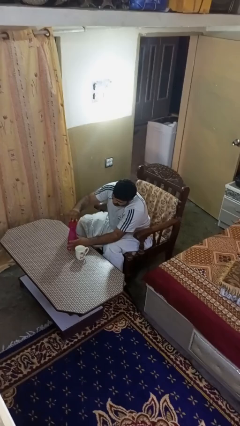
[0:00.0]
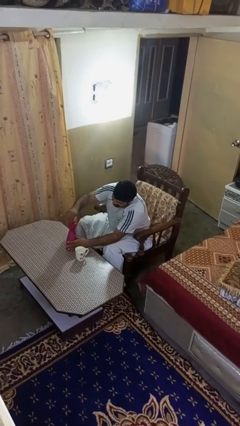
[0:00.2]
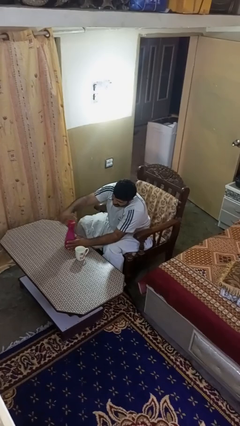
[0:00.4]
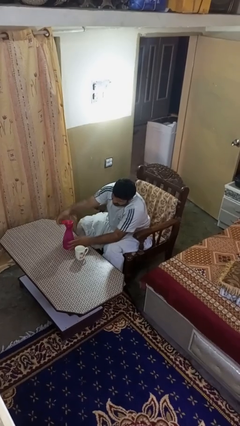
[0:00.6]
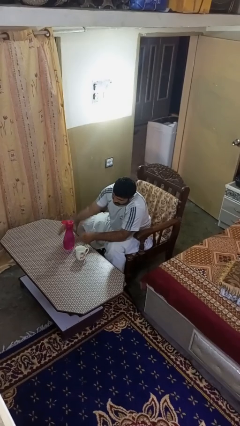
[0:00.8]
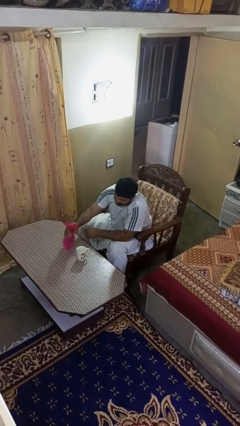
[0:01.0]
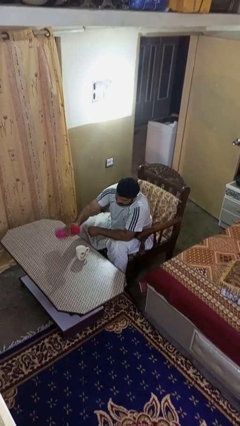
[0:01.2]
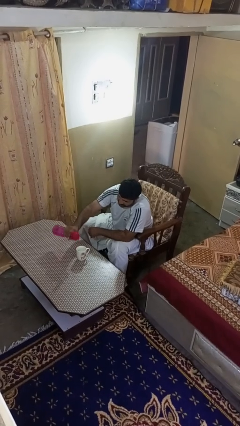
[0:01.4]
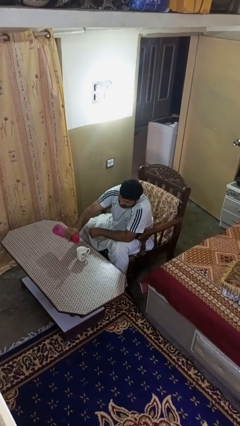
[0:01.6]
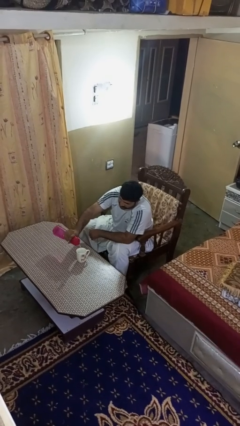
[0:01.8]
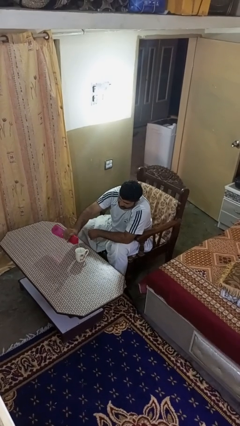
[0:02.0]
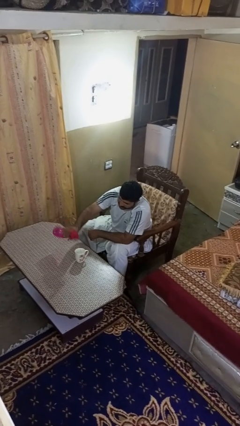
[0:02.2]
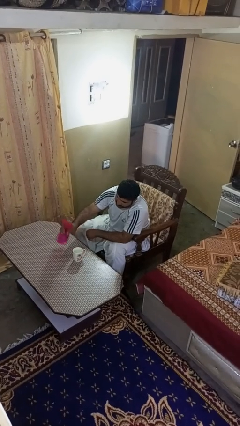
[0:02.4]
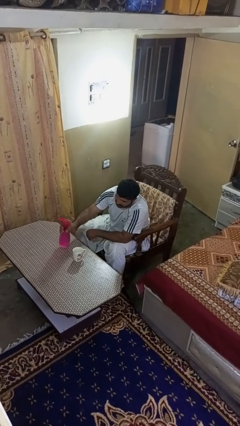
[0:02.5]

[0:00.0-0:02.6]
person pours liquid into cup

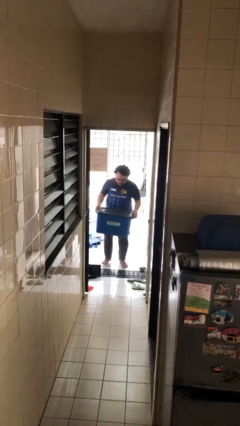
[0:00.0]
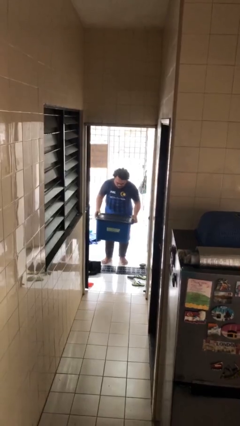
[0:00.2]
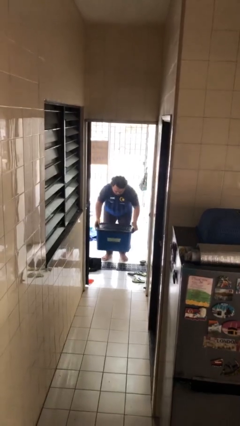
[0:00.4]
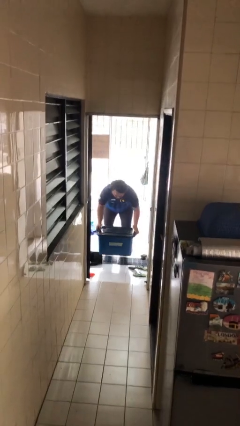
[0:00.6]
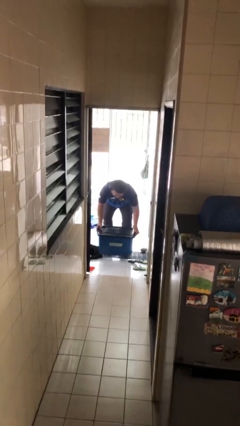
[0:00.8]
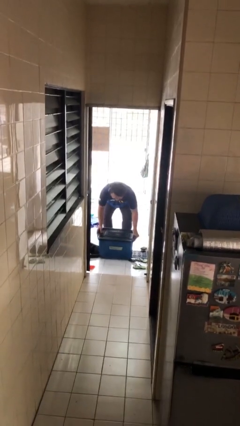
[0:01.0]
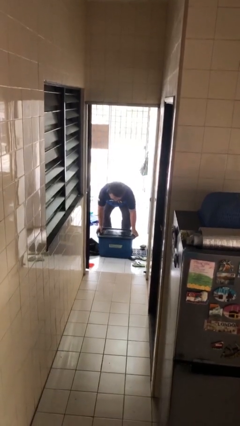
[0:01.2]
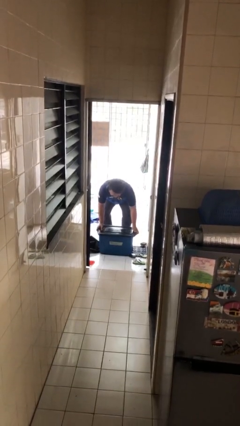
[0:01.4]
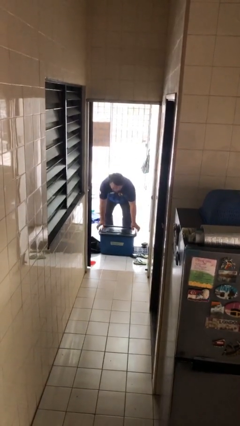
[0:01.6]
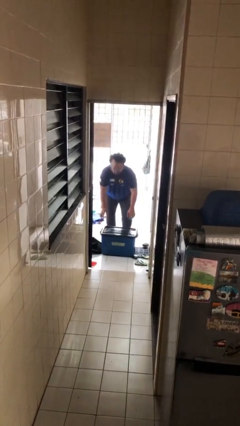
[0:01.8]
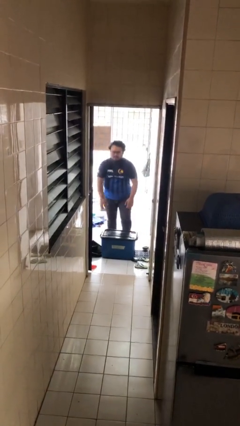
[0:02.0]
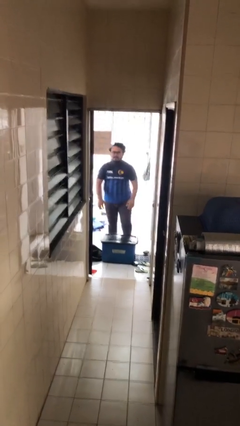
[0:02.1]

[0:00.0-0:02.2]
person puts down object on floor

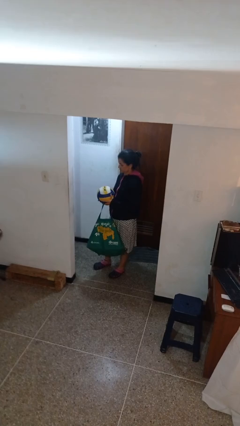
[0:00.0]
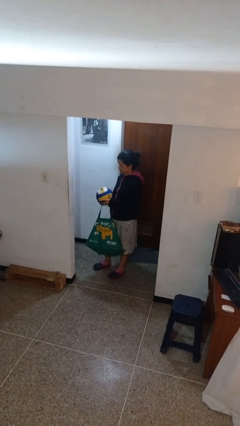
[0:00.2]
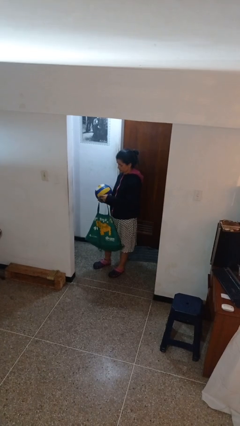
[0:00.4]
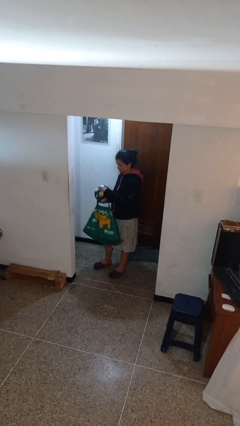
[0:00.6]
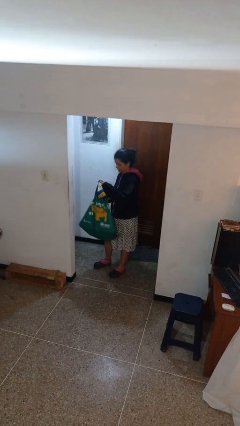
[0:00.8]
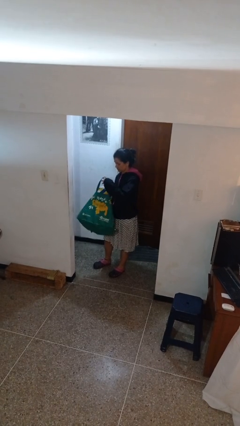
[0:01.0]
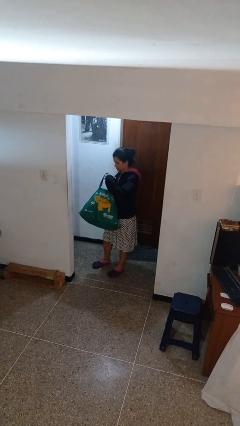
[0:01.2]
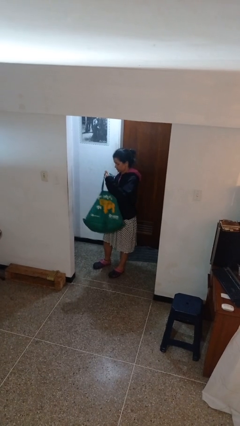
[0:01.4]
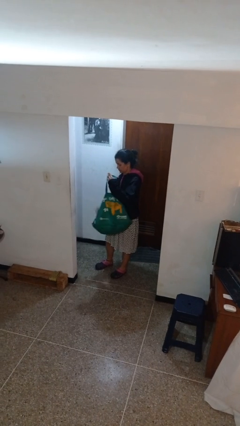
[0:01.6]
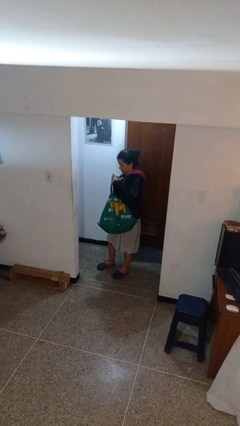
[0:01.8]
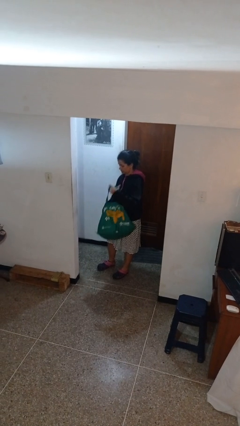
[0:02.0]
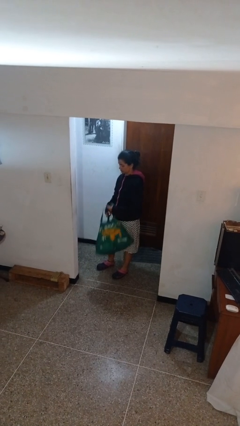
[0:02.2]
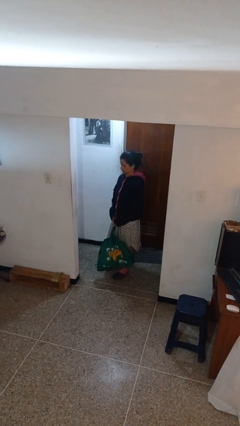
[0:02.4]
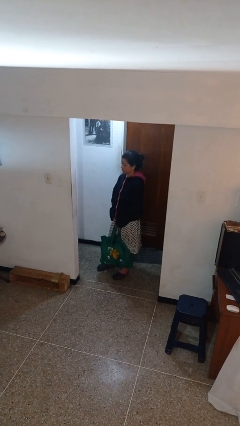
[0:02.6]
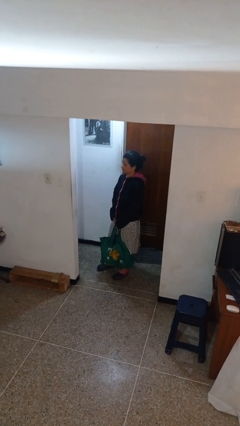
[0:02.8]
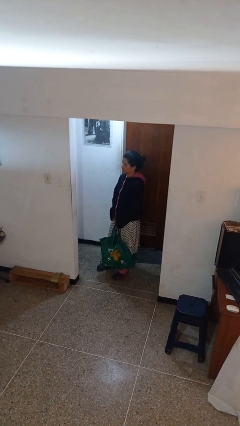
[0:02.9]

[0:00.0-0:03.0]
person puts object into bag

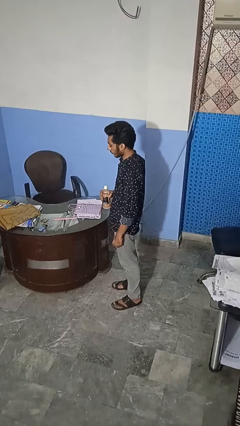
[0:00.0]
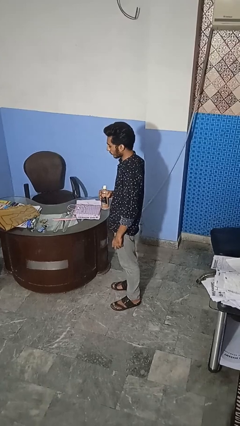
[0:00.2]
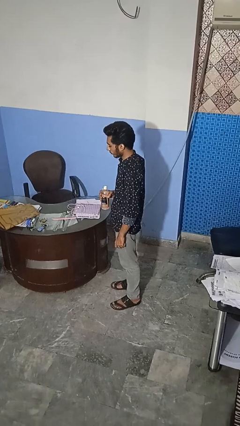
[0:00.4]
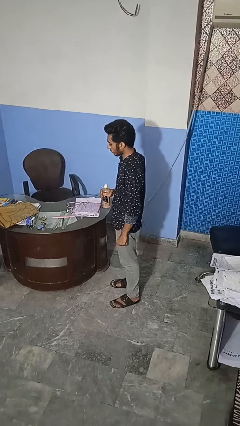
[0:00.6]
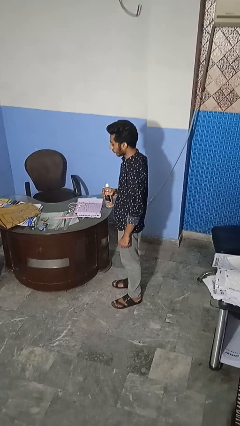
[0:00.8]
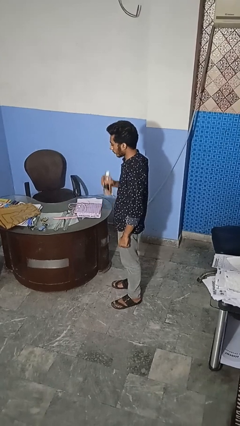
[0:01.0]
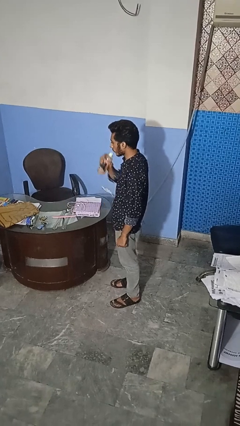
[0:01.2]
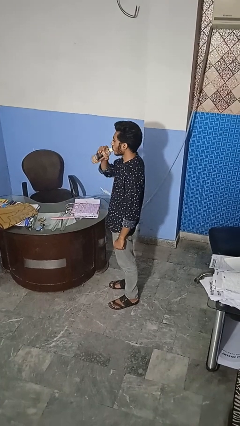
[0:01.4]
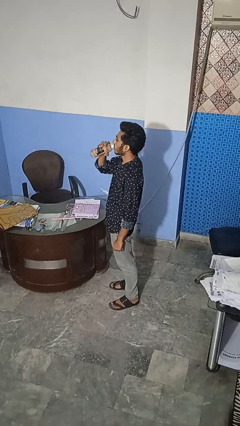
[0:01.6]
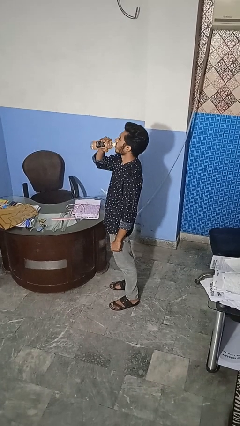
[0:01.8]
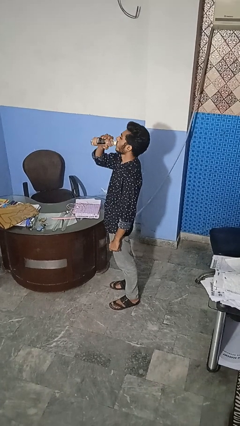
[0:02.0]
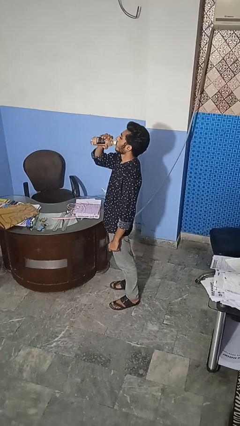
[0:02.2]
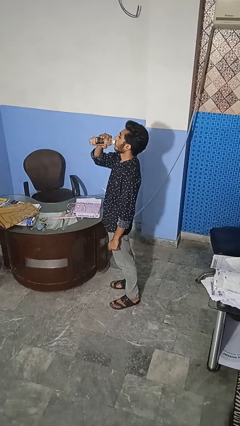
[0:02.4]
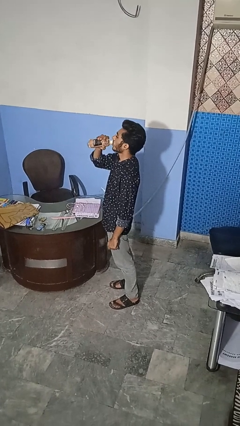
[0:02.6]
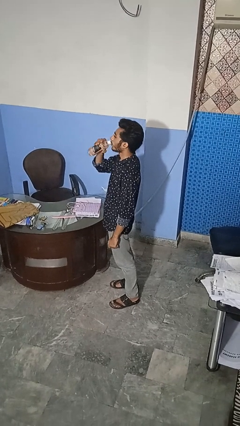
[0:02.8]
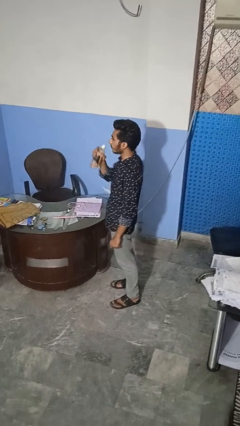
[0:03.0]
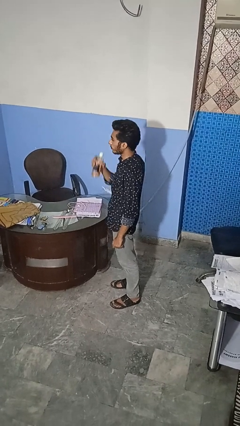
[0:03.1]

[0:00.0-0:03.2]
person drinks from bottle

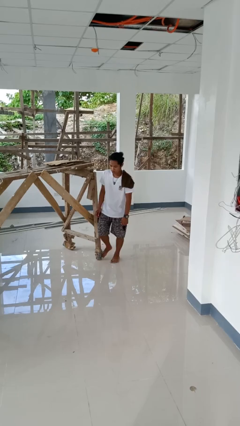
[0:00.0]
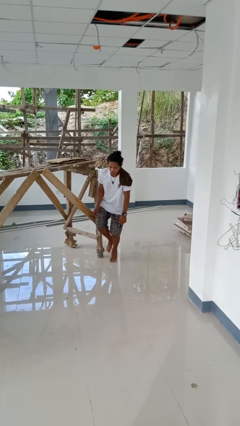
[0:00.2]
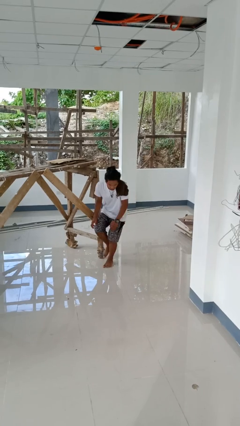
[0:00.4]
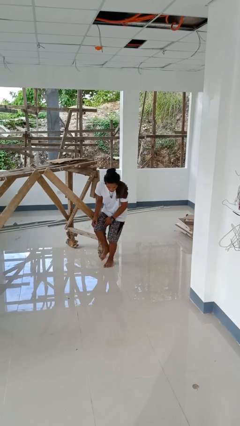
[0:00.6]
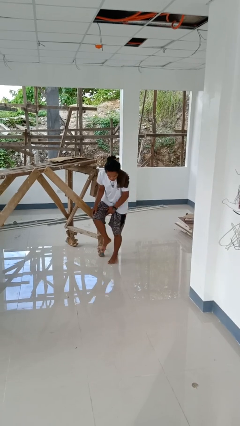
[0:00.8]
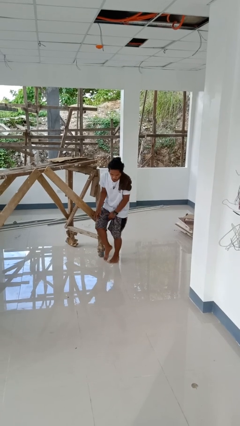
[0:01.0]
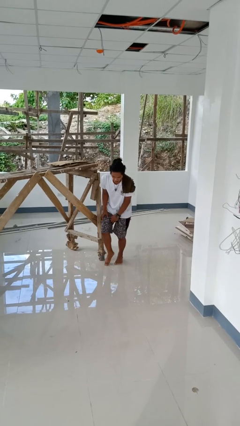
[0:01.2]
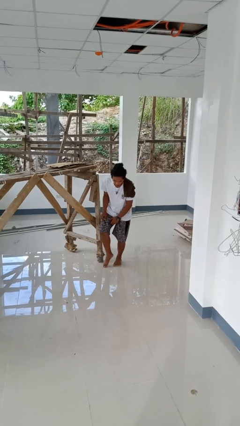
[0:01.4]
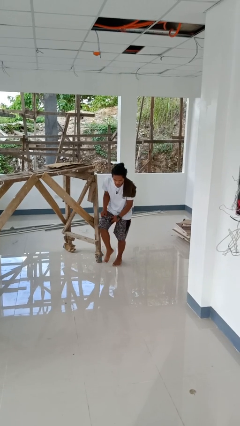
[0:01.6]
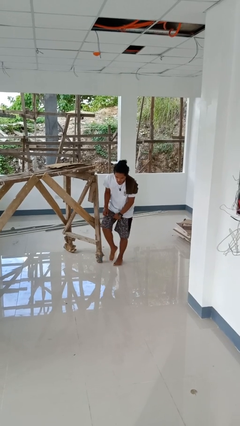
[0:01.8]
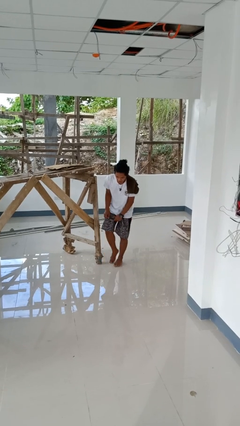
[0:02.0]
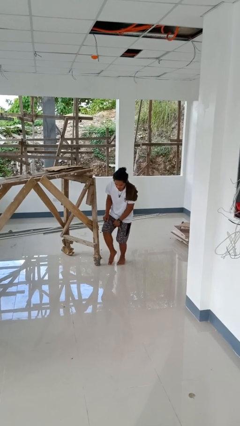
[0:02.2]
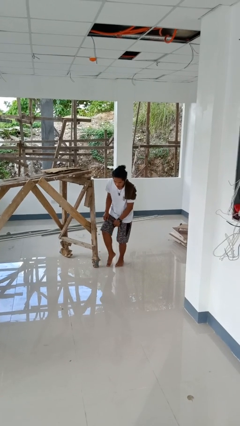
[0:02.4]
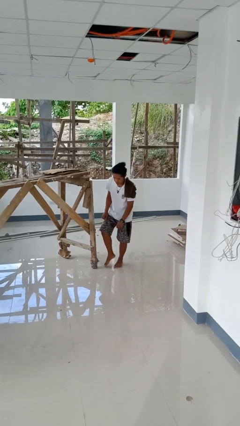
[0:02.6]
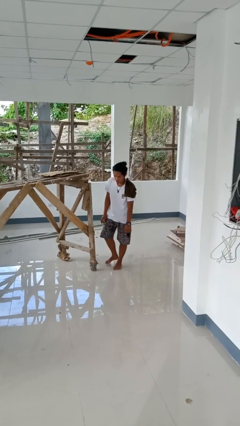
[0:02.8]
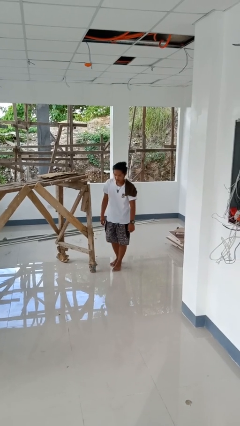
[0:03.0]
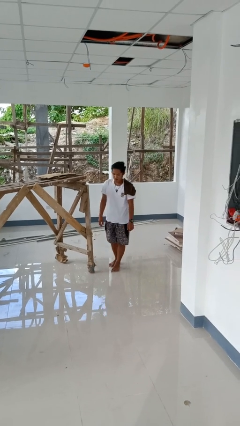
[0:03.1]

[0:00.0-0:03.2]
person stubs toe

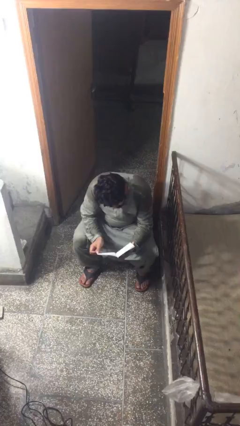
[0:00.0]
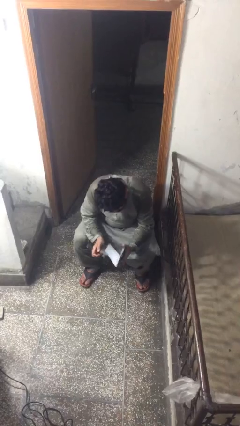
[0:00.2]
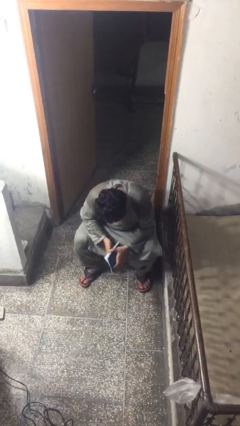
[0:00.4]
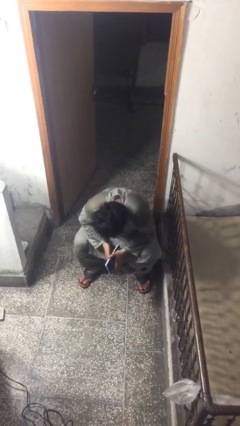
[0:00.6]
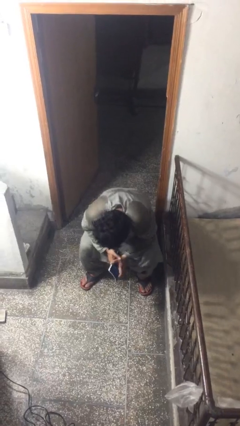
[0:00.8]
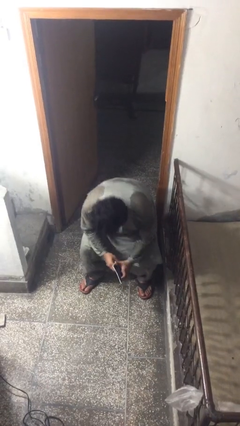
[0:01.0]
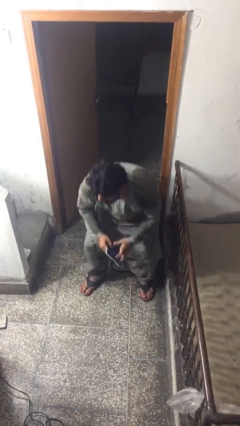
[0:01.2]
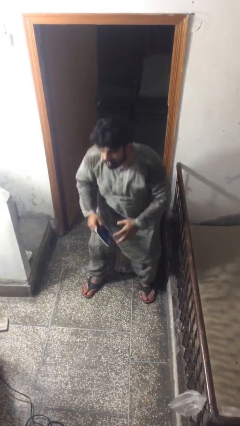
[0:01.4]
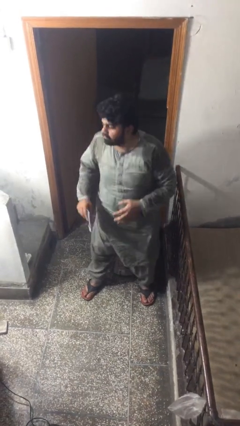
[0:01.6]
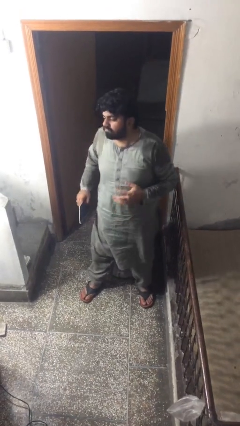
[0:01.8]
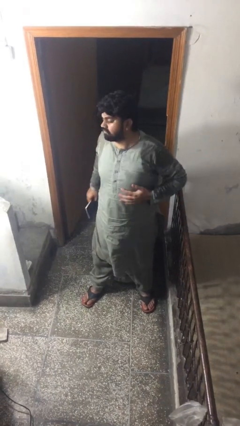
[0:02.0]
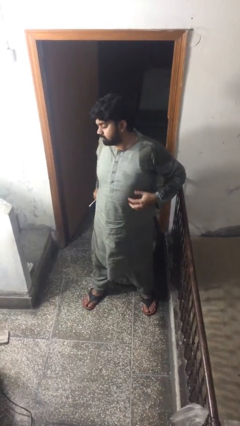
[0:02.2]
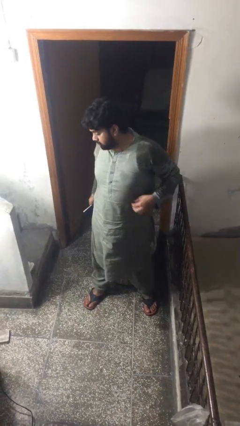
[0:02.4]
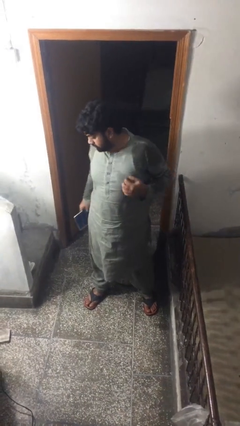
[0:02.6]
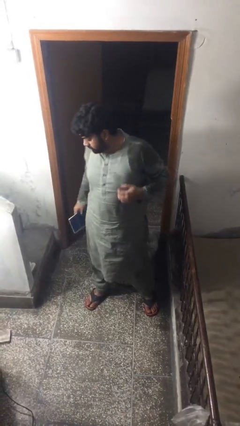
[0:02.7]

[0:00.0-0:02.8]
person stands up
